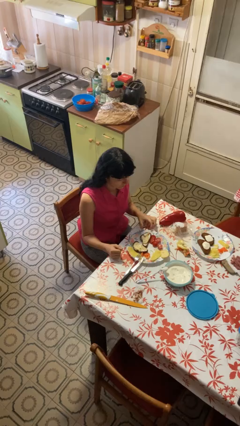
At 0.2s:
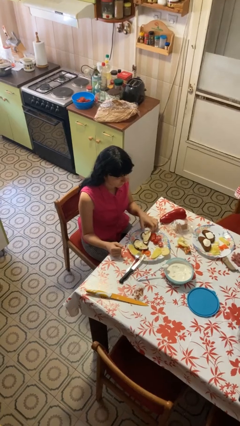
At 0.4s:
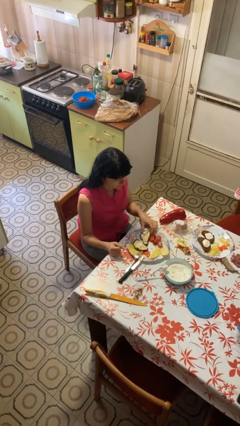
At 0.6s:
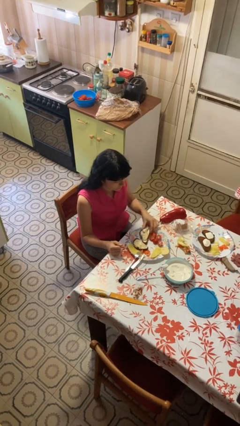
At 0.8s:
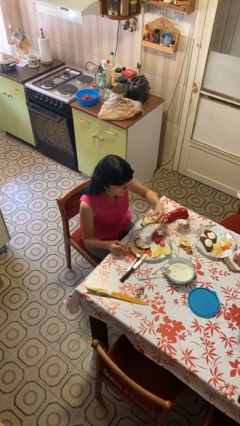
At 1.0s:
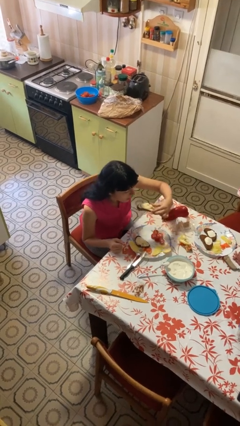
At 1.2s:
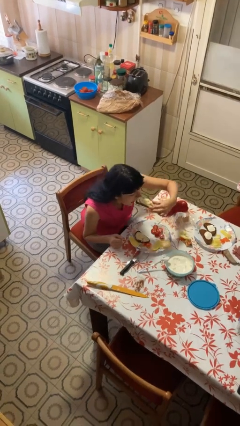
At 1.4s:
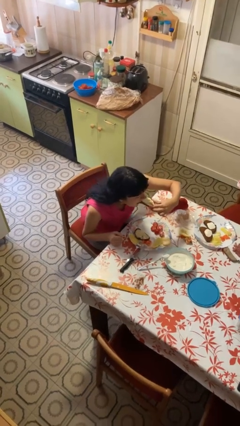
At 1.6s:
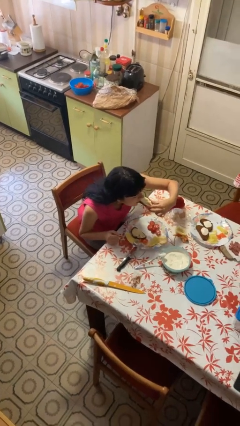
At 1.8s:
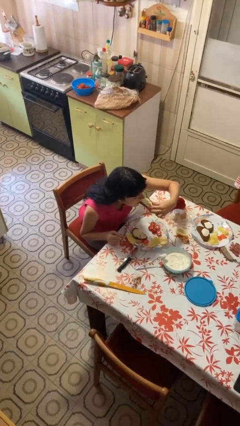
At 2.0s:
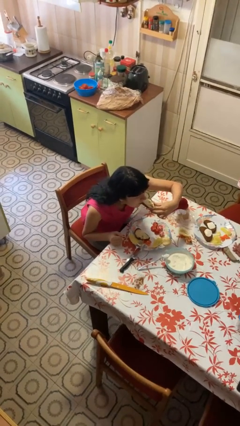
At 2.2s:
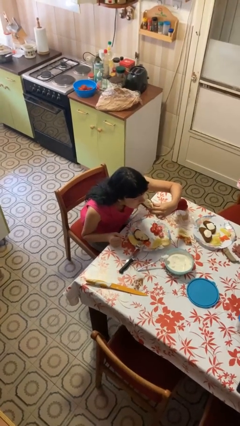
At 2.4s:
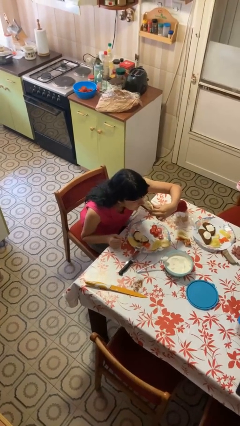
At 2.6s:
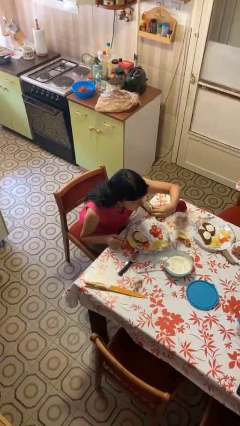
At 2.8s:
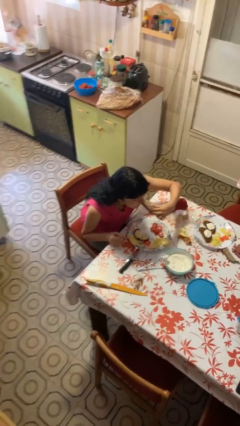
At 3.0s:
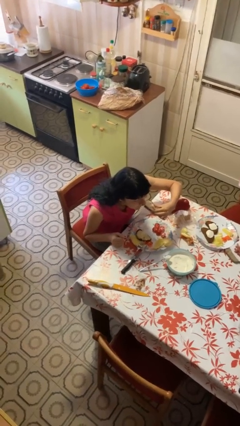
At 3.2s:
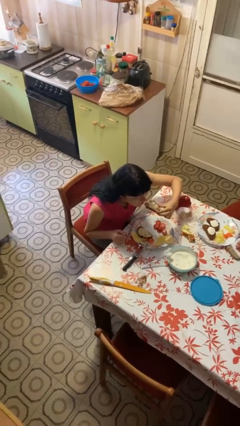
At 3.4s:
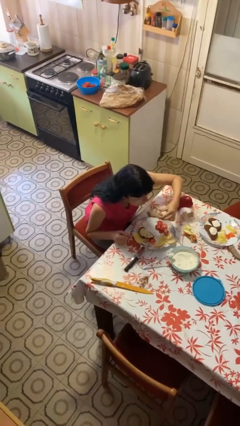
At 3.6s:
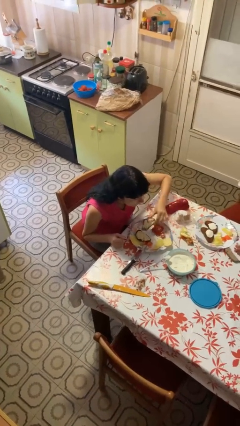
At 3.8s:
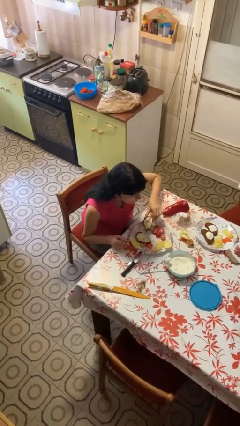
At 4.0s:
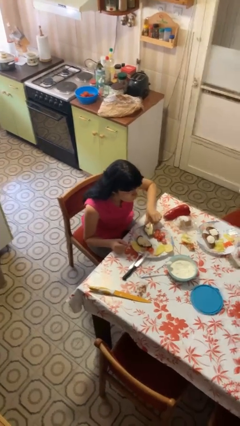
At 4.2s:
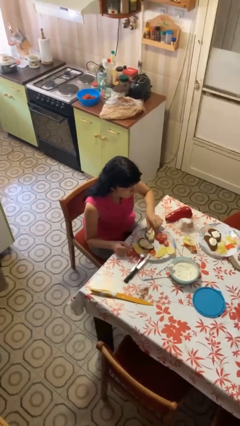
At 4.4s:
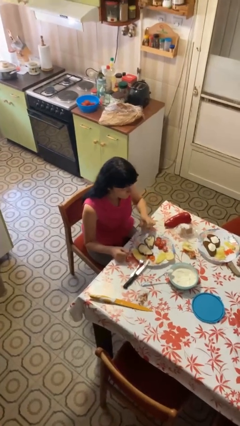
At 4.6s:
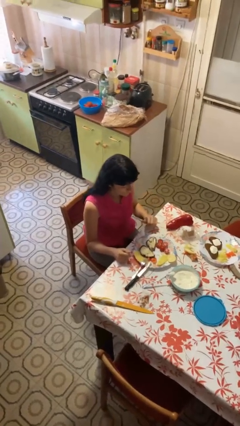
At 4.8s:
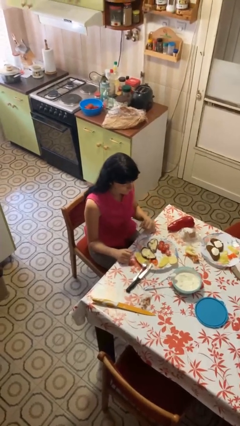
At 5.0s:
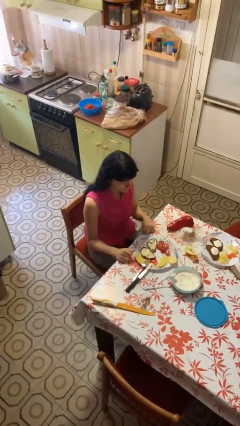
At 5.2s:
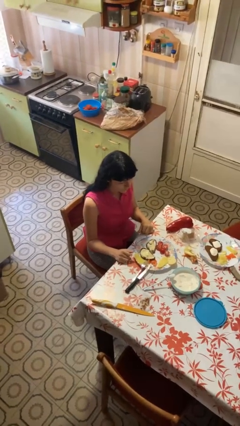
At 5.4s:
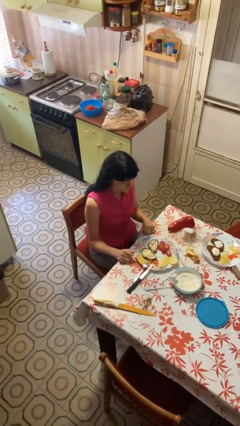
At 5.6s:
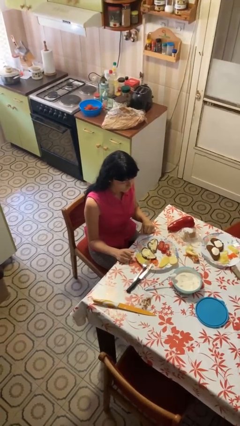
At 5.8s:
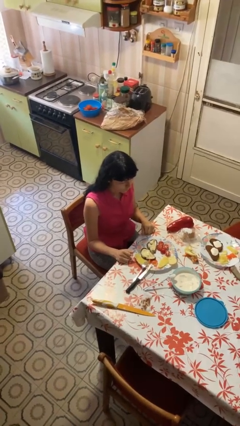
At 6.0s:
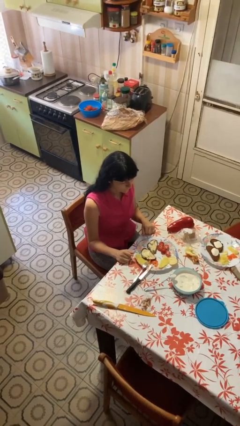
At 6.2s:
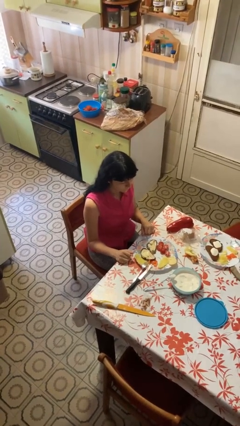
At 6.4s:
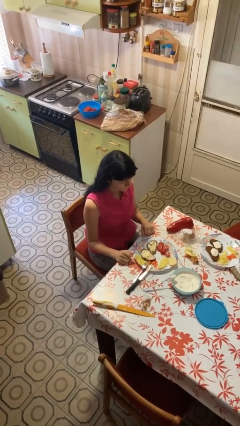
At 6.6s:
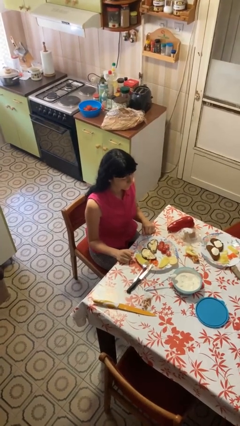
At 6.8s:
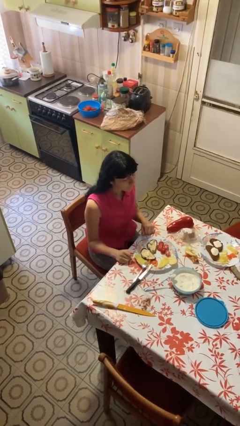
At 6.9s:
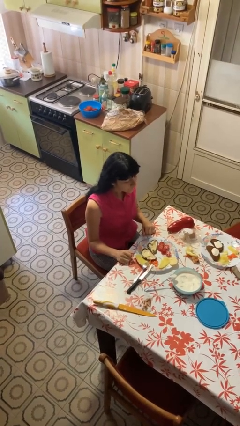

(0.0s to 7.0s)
person eats with hands

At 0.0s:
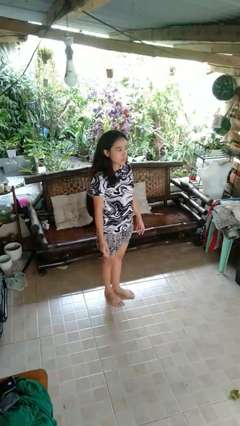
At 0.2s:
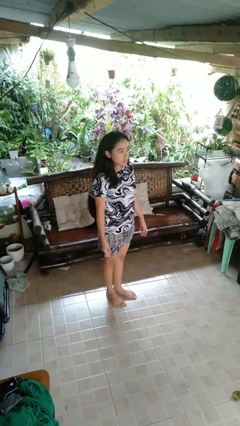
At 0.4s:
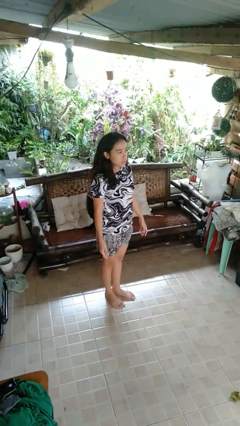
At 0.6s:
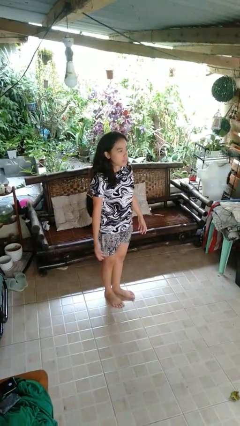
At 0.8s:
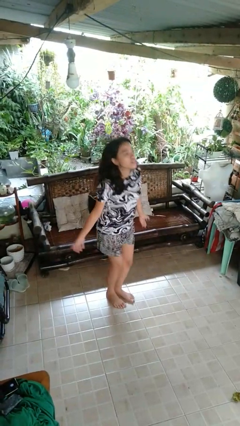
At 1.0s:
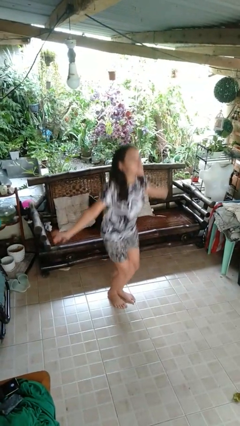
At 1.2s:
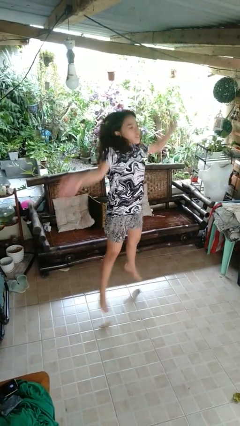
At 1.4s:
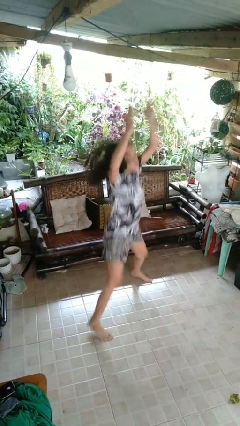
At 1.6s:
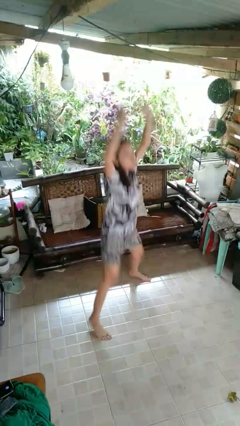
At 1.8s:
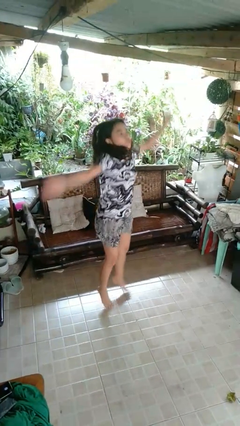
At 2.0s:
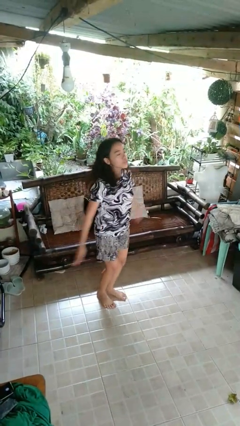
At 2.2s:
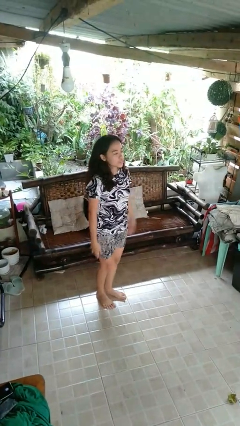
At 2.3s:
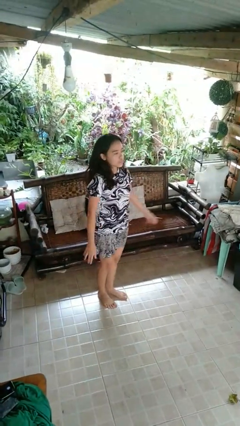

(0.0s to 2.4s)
person exercises with jumping jacks

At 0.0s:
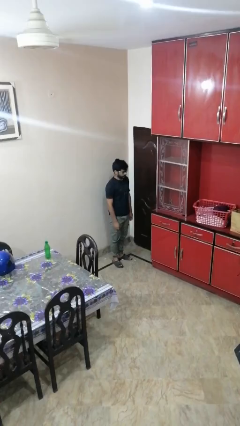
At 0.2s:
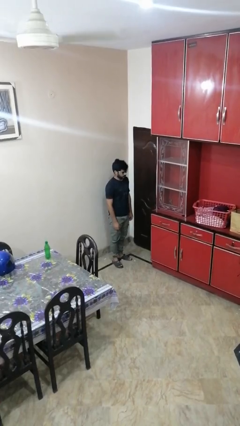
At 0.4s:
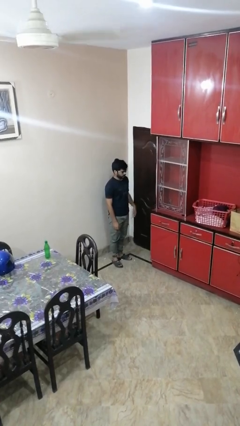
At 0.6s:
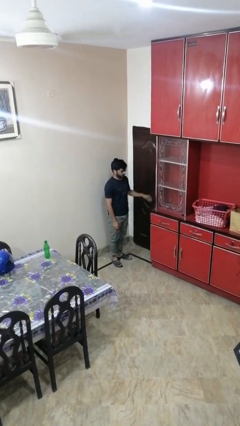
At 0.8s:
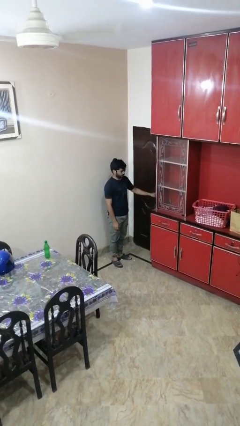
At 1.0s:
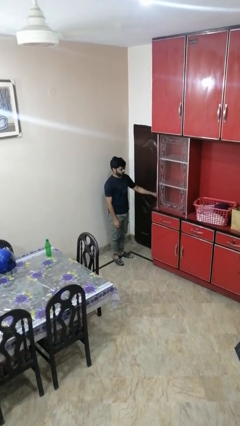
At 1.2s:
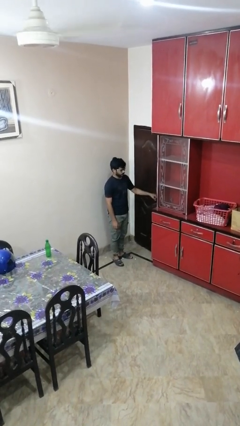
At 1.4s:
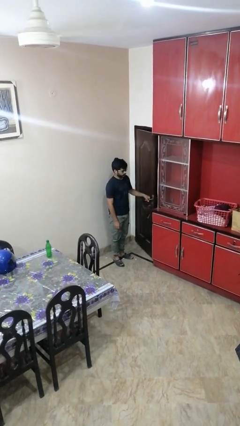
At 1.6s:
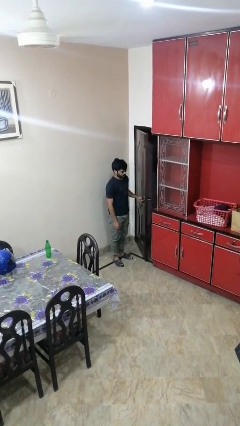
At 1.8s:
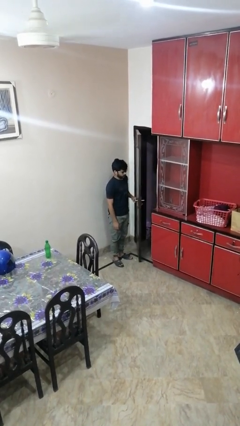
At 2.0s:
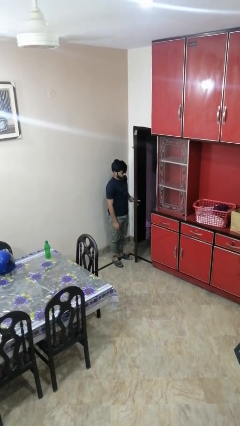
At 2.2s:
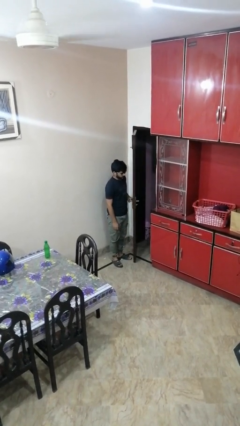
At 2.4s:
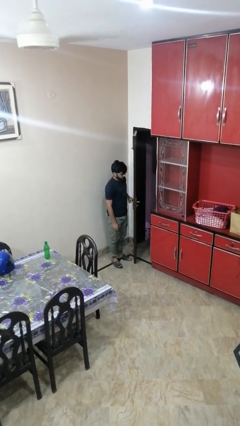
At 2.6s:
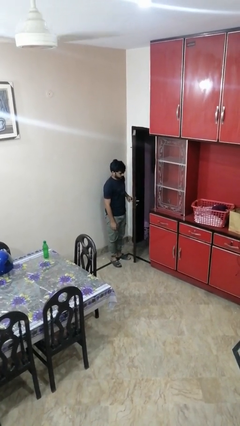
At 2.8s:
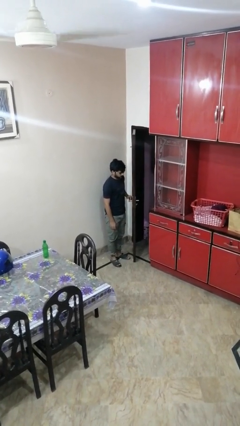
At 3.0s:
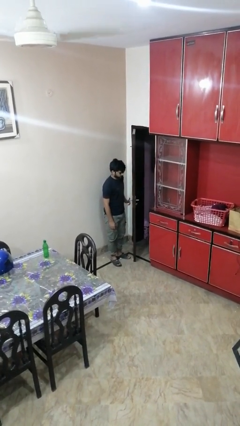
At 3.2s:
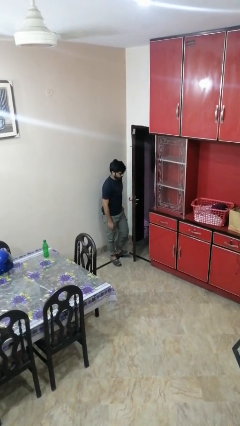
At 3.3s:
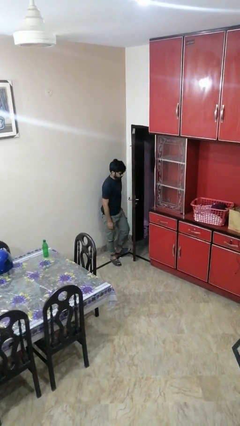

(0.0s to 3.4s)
person opens facility door

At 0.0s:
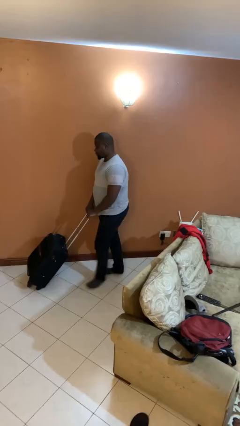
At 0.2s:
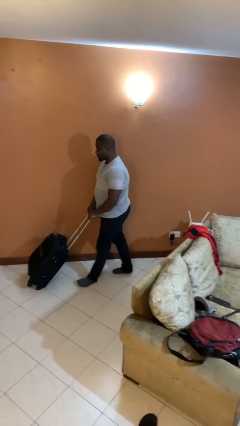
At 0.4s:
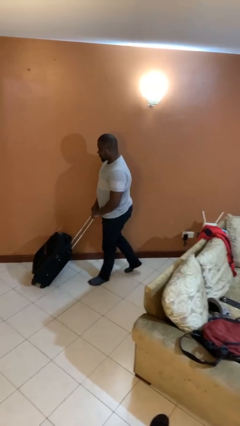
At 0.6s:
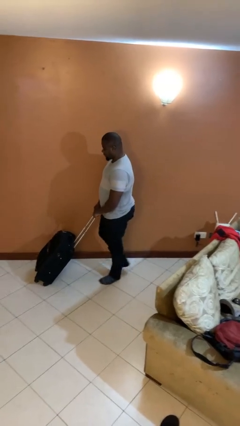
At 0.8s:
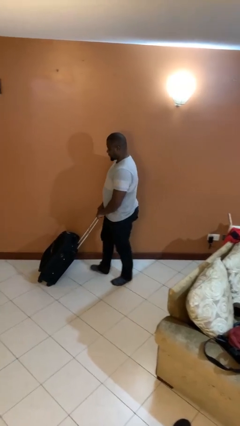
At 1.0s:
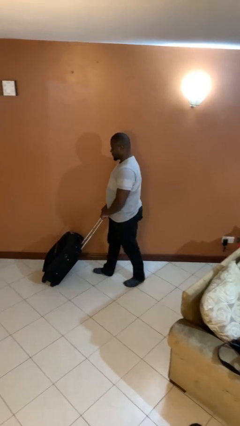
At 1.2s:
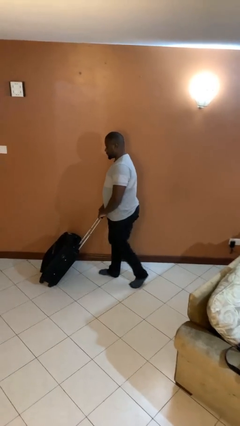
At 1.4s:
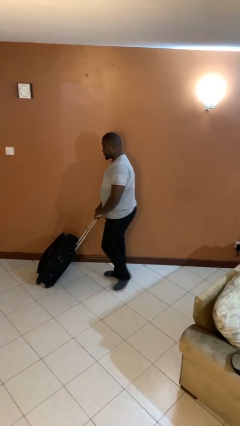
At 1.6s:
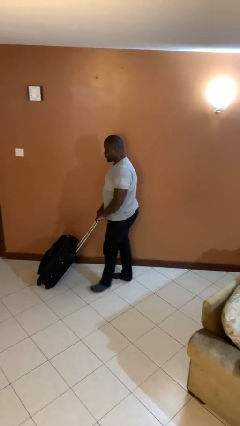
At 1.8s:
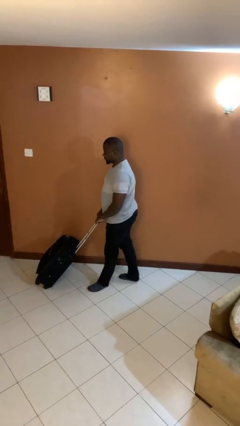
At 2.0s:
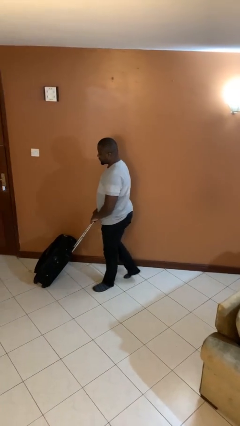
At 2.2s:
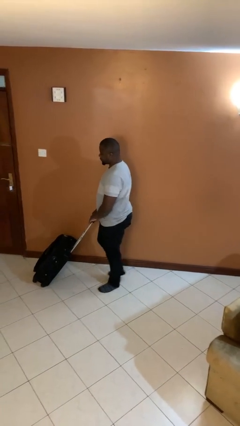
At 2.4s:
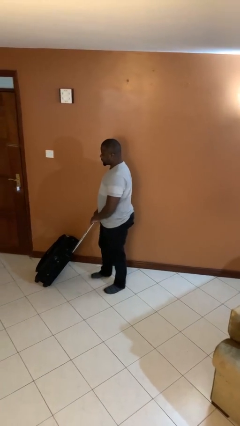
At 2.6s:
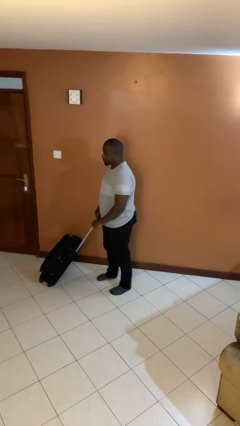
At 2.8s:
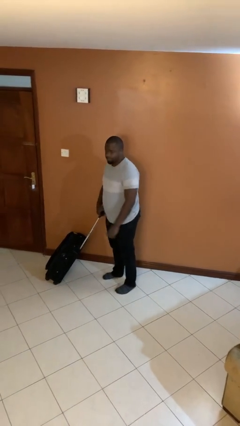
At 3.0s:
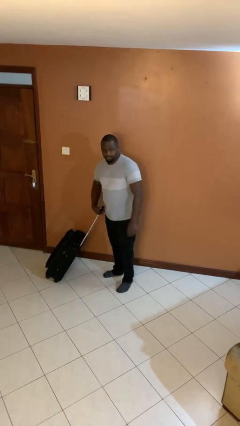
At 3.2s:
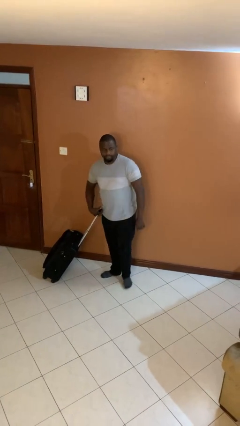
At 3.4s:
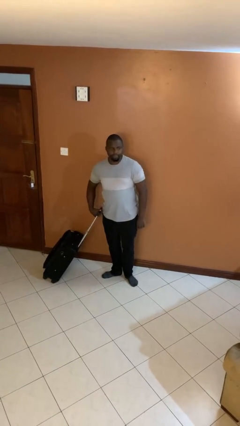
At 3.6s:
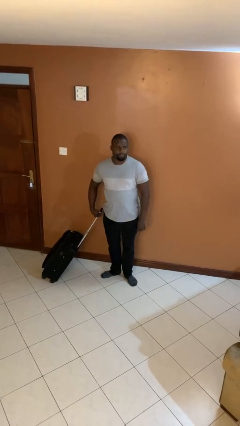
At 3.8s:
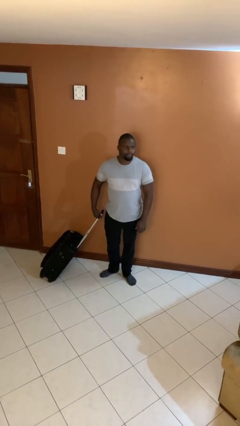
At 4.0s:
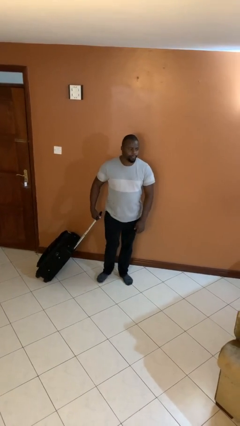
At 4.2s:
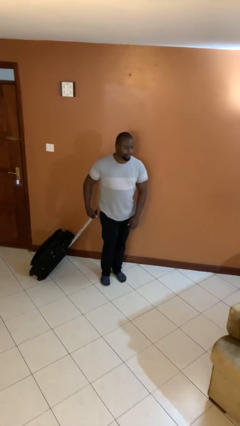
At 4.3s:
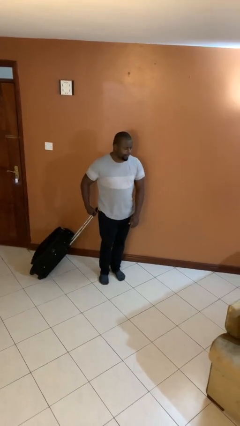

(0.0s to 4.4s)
person pushes wheeled cart

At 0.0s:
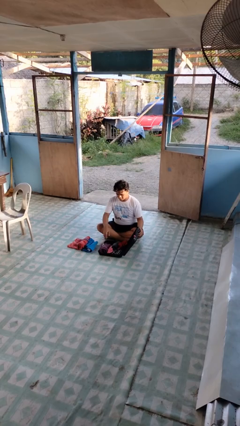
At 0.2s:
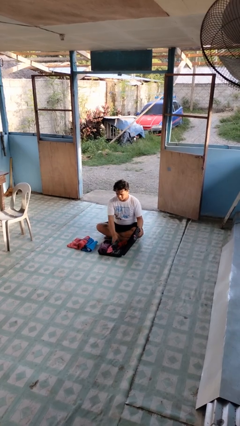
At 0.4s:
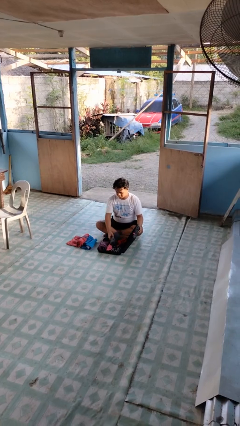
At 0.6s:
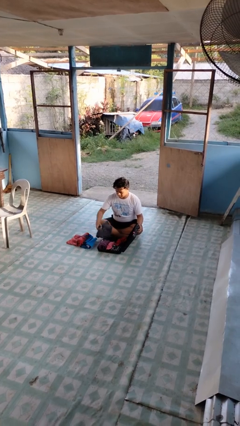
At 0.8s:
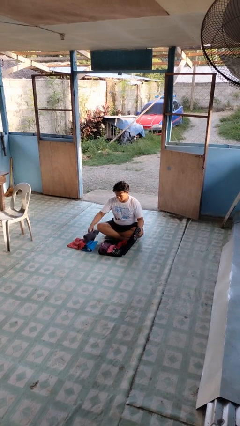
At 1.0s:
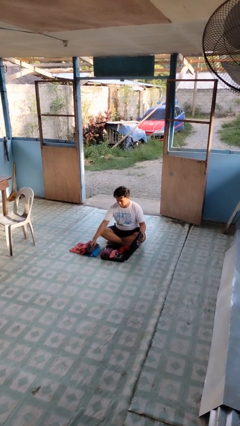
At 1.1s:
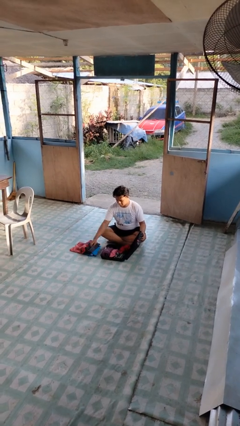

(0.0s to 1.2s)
person unloads clothes from suitcase
